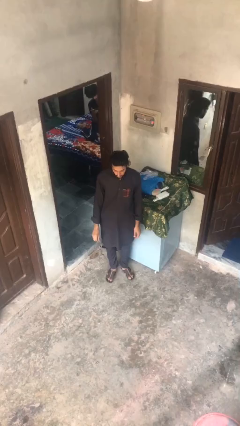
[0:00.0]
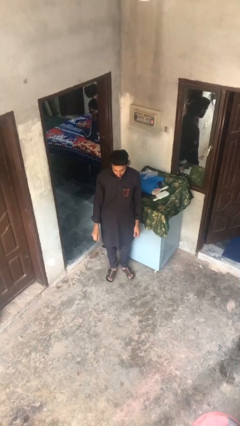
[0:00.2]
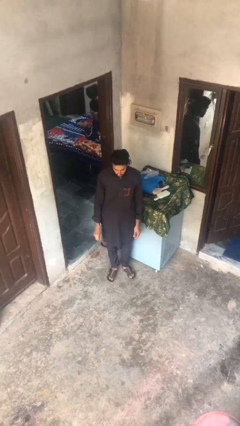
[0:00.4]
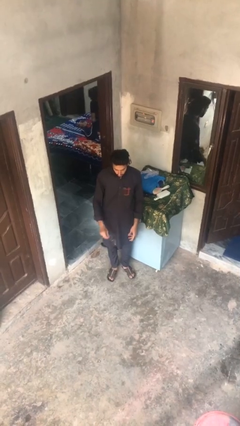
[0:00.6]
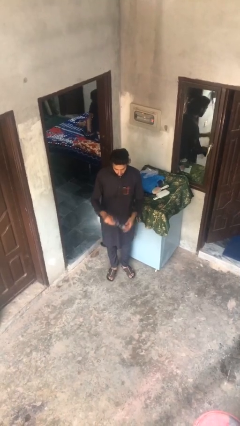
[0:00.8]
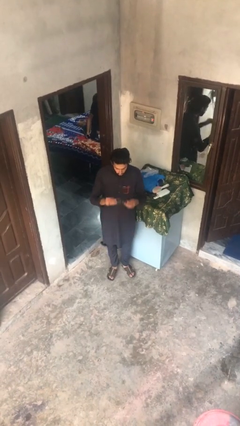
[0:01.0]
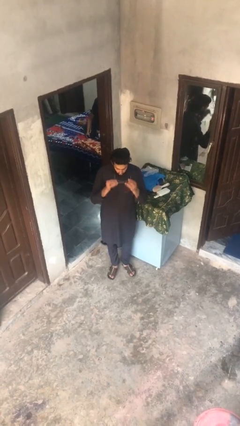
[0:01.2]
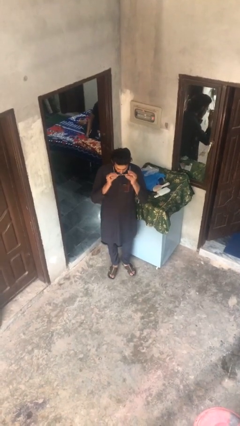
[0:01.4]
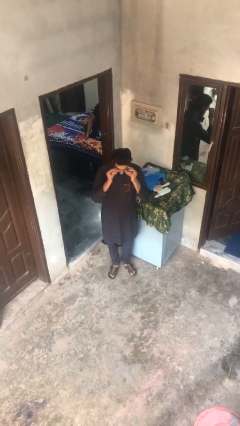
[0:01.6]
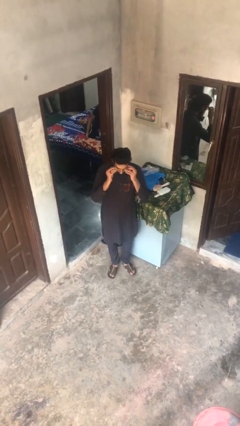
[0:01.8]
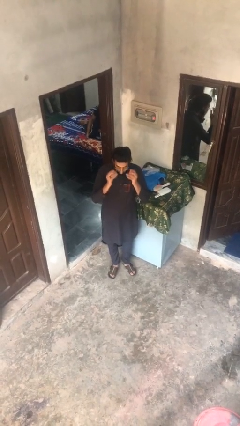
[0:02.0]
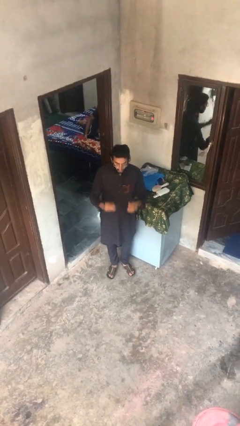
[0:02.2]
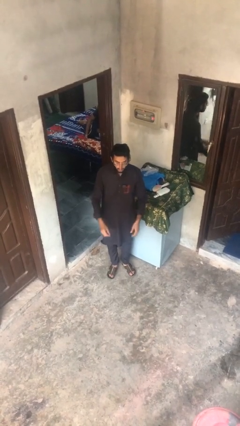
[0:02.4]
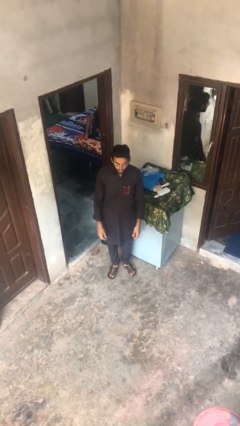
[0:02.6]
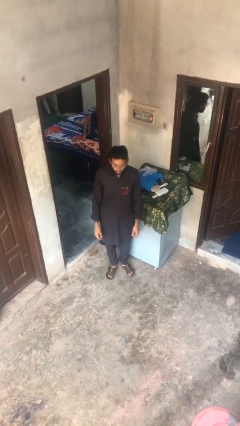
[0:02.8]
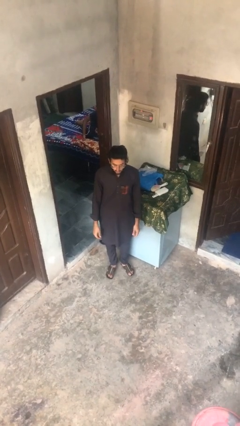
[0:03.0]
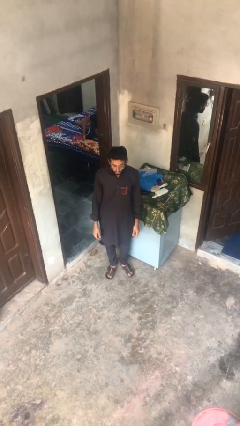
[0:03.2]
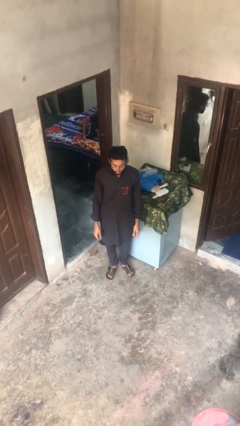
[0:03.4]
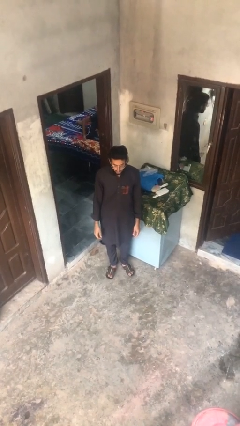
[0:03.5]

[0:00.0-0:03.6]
person puts on glasses

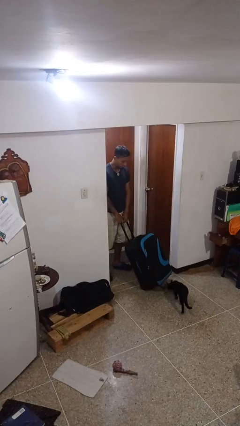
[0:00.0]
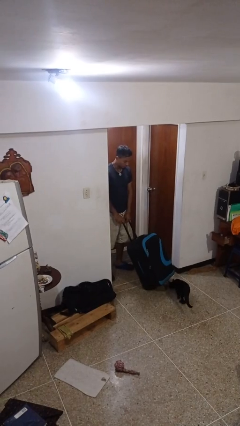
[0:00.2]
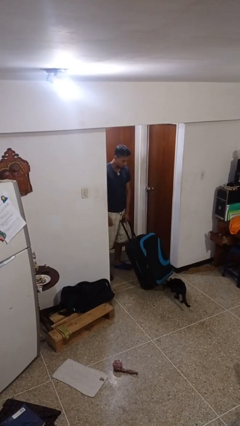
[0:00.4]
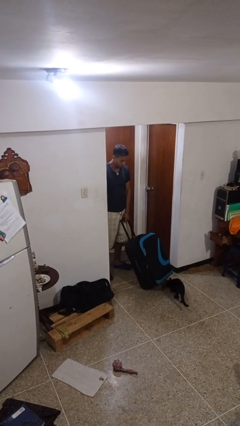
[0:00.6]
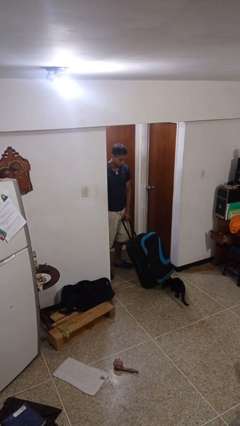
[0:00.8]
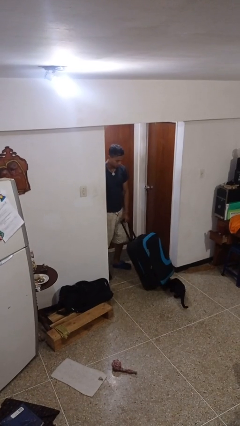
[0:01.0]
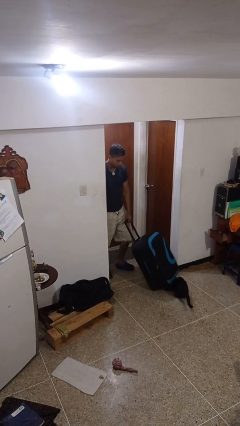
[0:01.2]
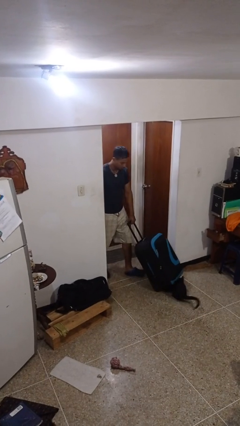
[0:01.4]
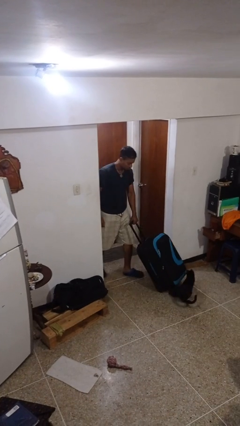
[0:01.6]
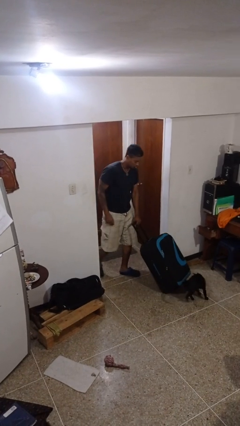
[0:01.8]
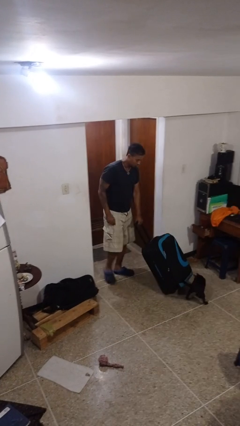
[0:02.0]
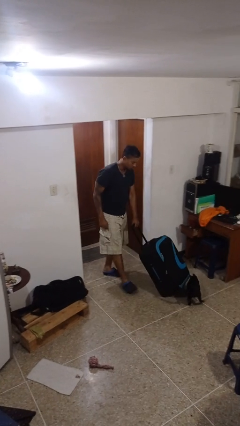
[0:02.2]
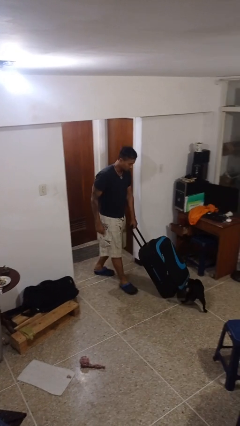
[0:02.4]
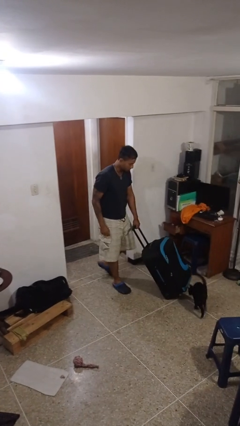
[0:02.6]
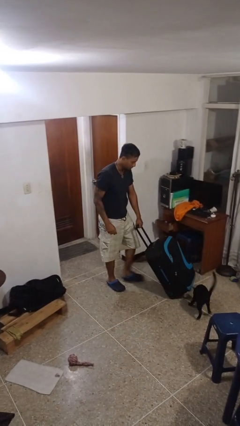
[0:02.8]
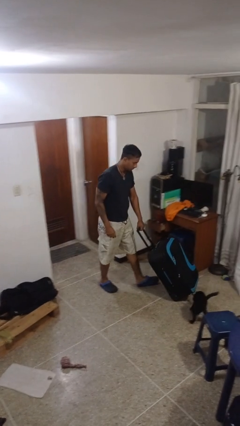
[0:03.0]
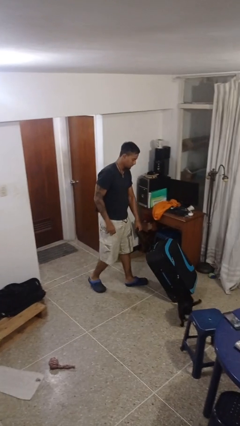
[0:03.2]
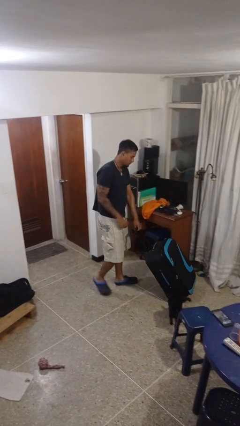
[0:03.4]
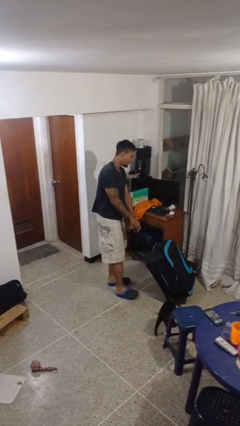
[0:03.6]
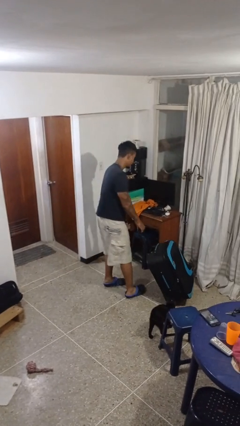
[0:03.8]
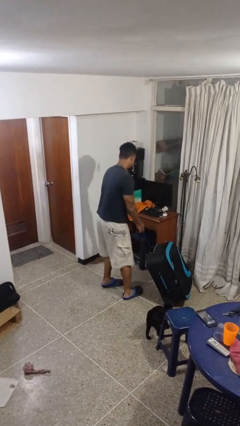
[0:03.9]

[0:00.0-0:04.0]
person pushes wheeled cart

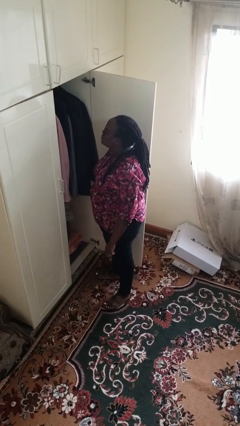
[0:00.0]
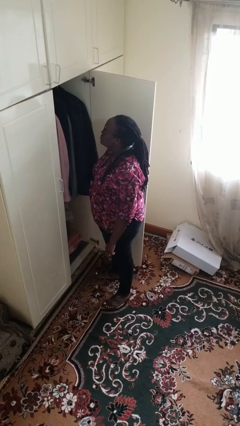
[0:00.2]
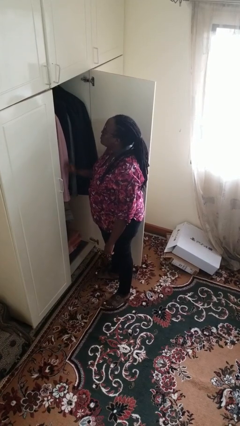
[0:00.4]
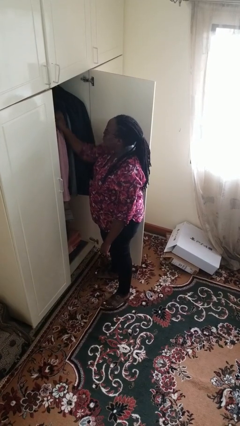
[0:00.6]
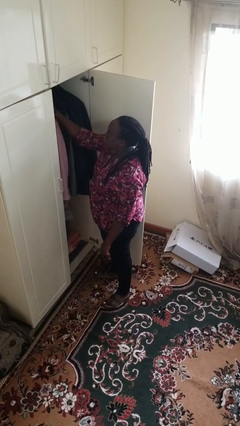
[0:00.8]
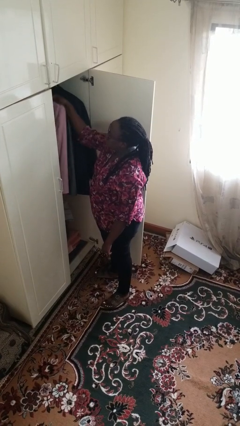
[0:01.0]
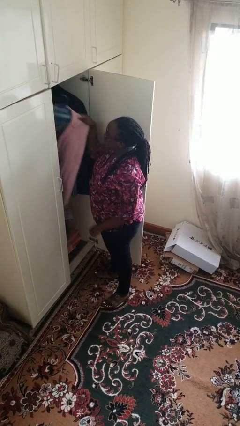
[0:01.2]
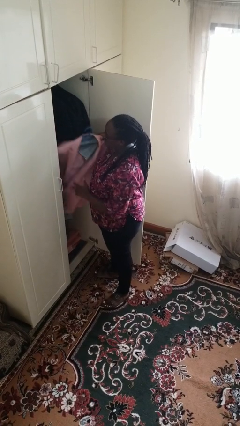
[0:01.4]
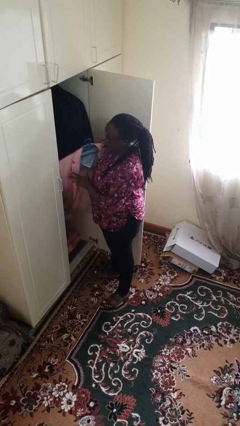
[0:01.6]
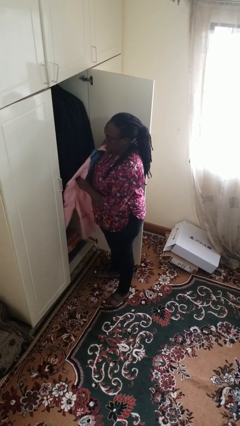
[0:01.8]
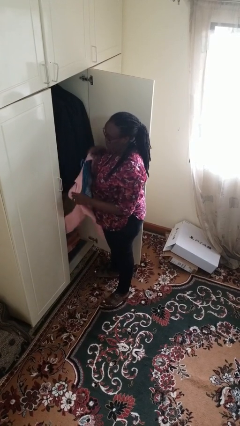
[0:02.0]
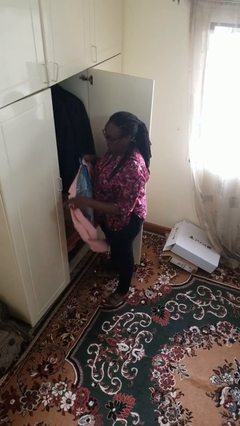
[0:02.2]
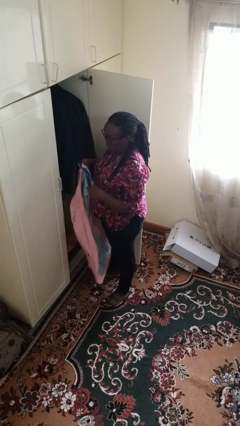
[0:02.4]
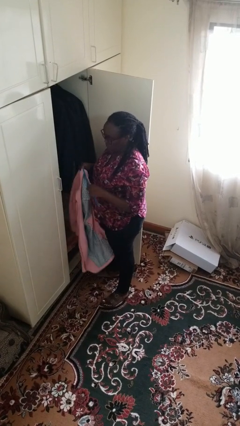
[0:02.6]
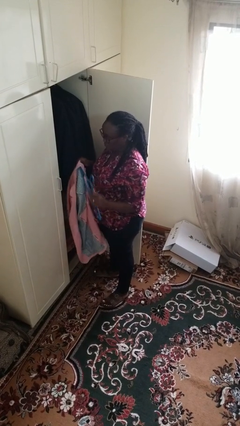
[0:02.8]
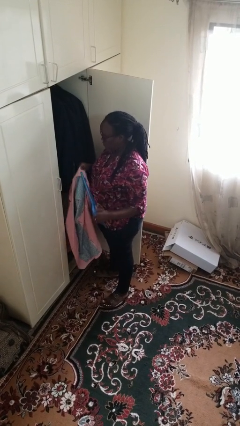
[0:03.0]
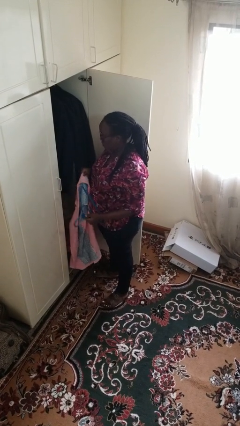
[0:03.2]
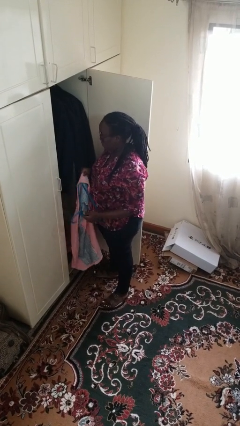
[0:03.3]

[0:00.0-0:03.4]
person takes clothes from closet

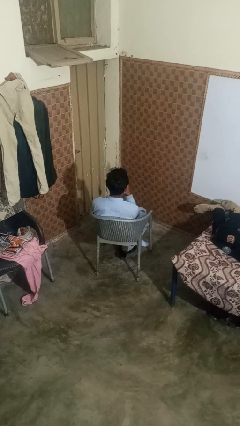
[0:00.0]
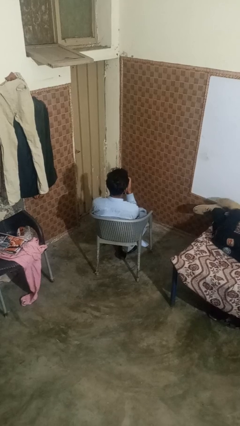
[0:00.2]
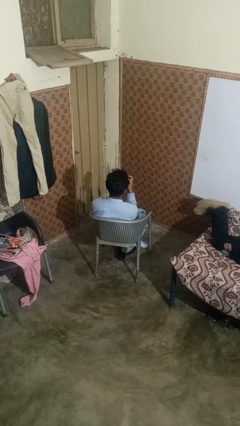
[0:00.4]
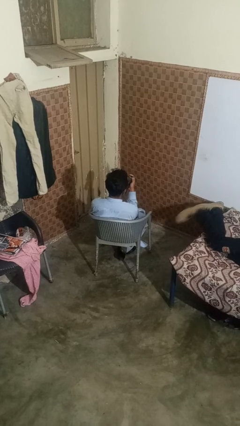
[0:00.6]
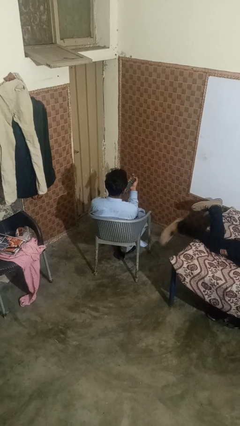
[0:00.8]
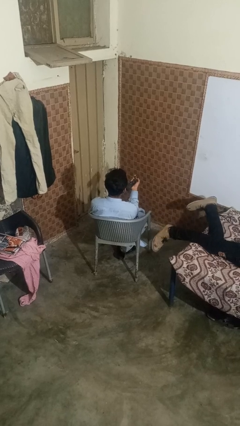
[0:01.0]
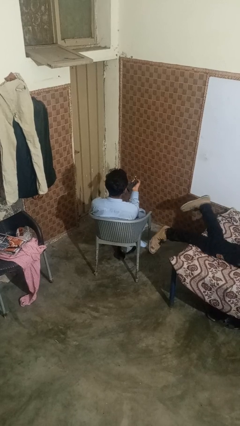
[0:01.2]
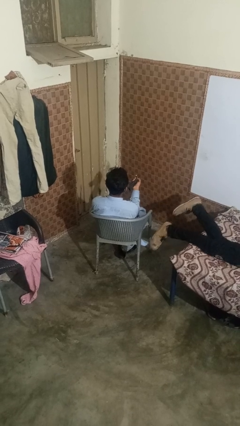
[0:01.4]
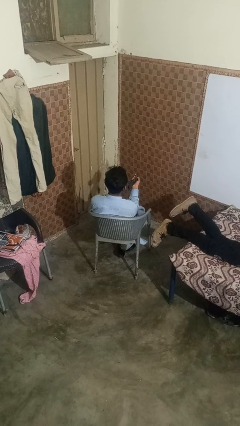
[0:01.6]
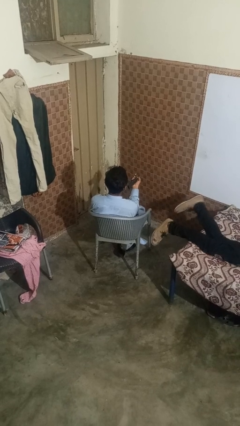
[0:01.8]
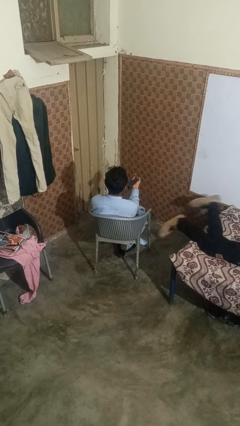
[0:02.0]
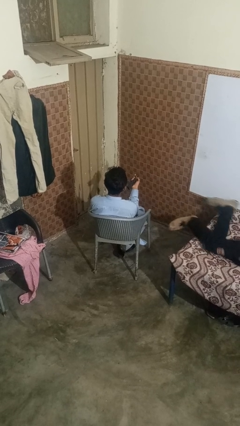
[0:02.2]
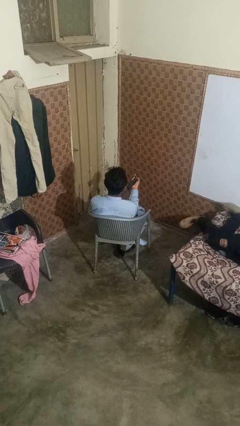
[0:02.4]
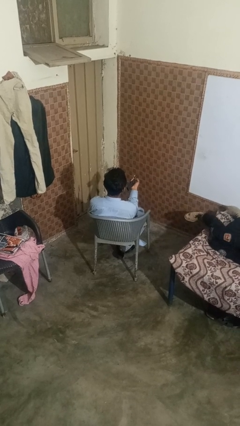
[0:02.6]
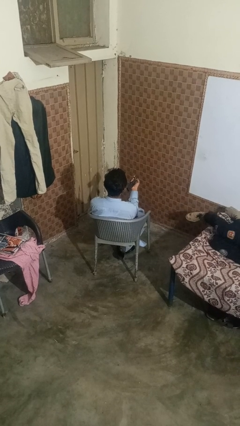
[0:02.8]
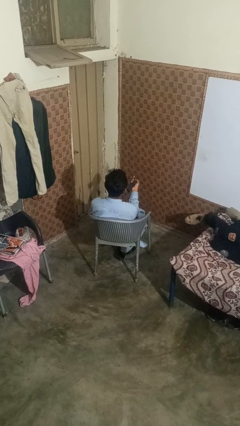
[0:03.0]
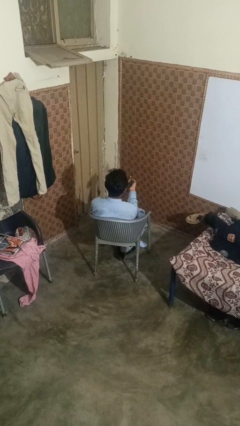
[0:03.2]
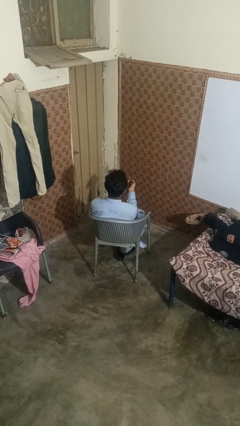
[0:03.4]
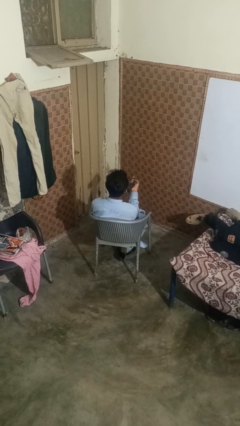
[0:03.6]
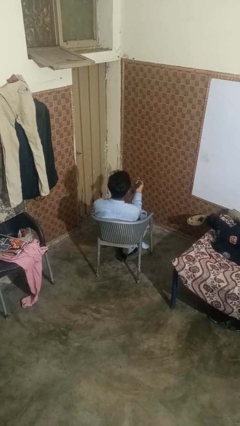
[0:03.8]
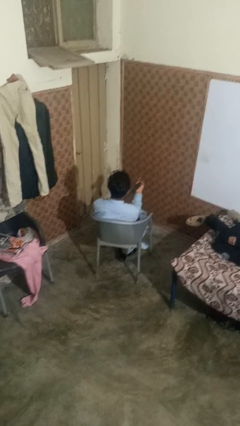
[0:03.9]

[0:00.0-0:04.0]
person uses television remote

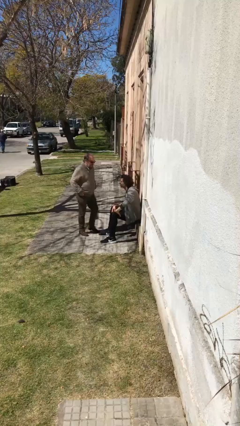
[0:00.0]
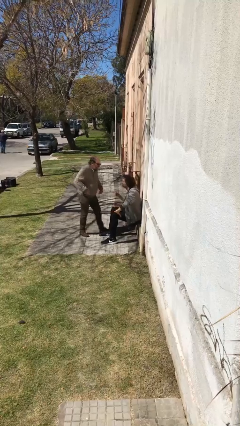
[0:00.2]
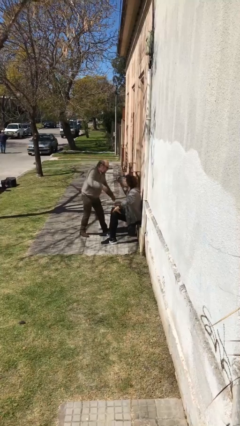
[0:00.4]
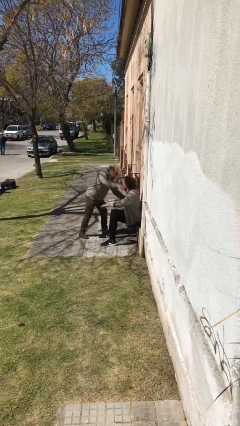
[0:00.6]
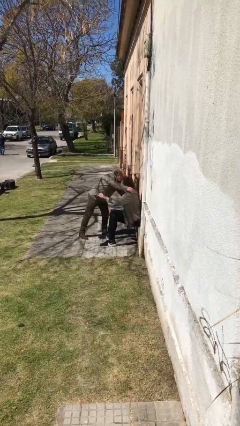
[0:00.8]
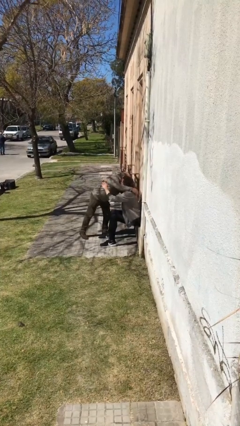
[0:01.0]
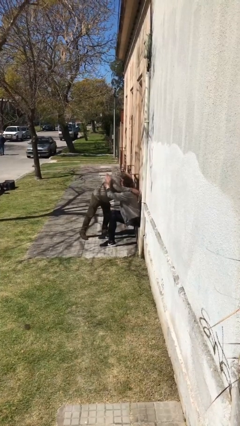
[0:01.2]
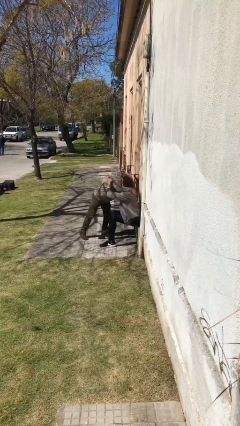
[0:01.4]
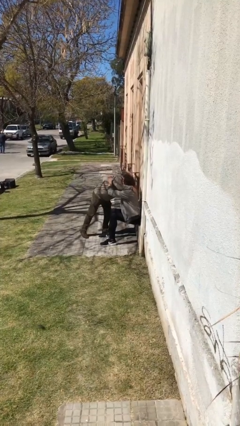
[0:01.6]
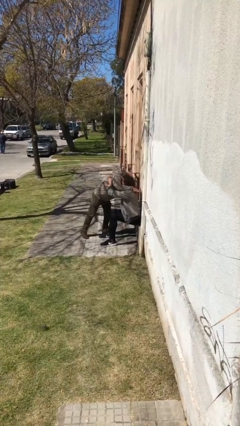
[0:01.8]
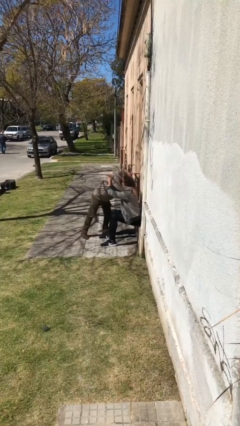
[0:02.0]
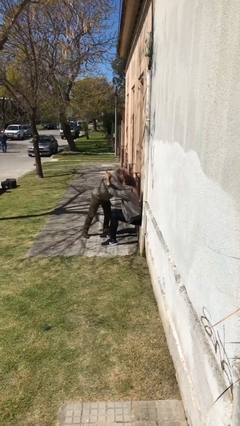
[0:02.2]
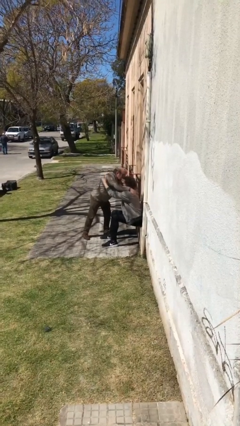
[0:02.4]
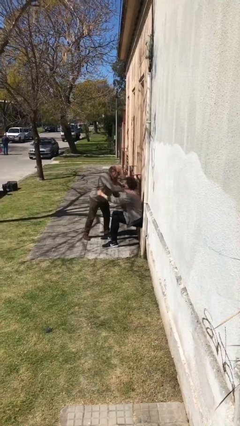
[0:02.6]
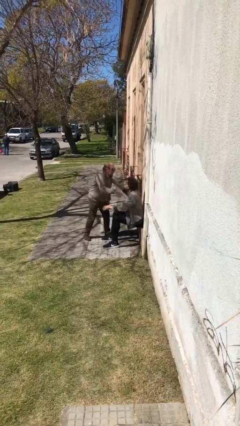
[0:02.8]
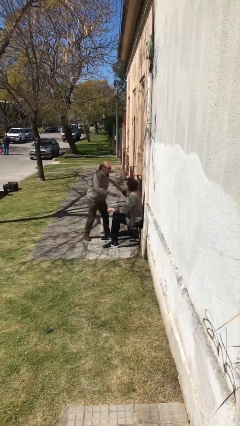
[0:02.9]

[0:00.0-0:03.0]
person embraces person
